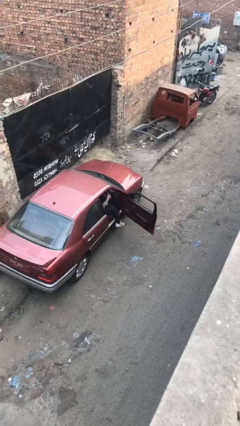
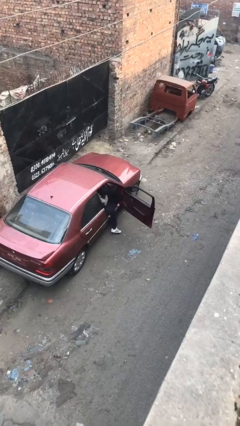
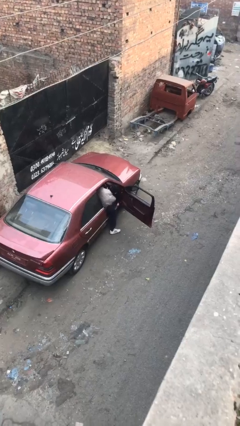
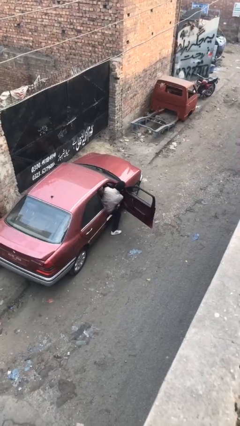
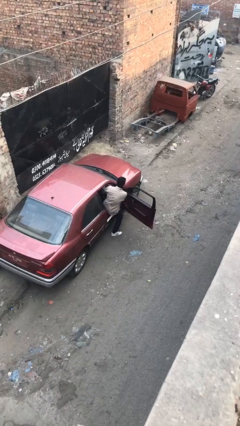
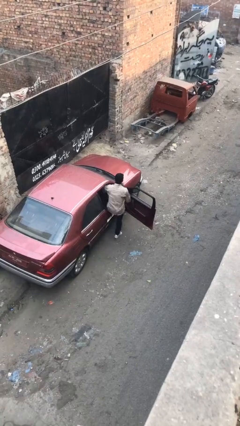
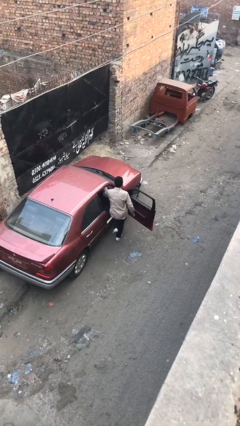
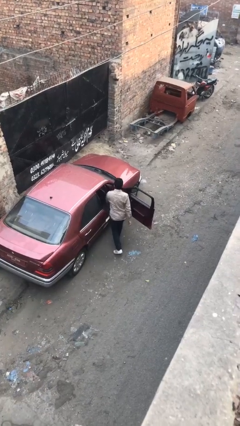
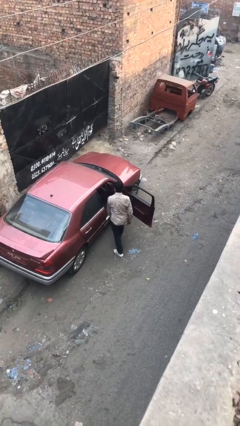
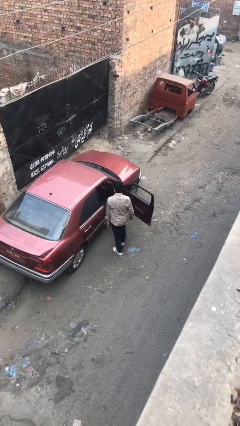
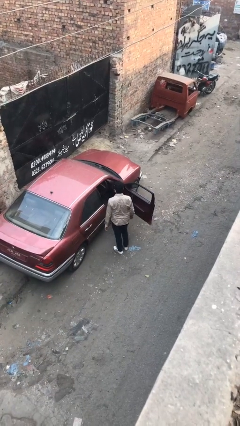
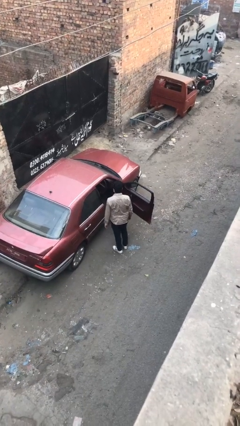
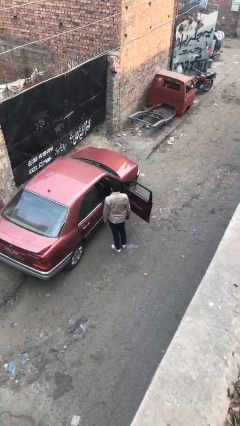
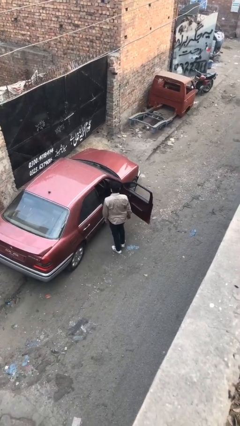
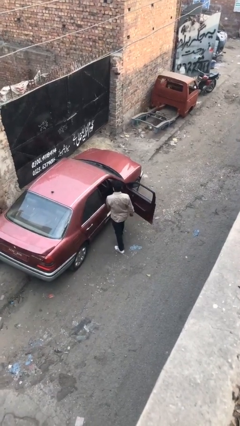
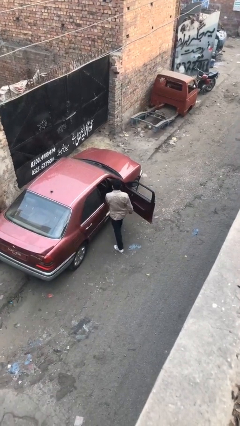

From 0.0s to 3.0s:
person exits car

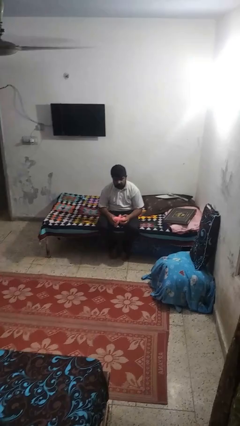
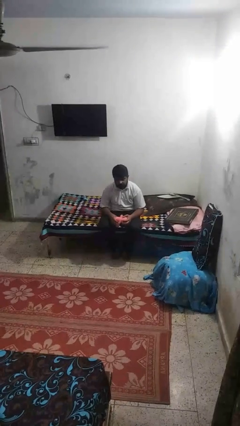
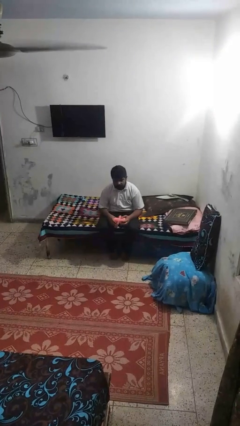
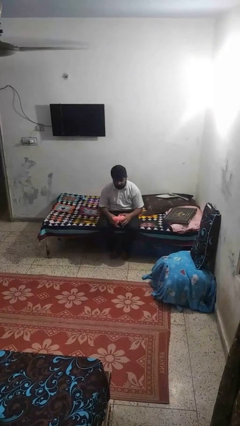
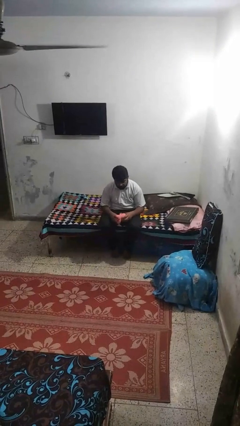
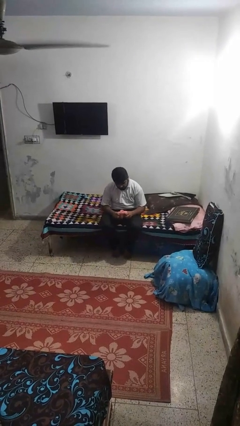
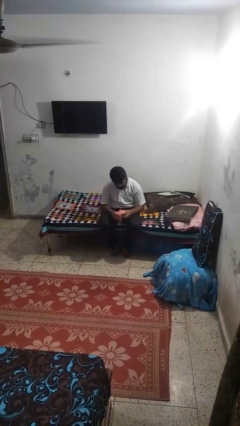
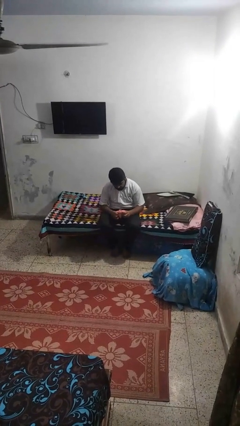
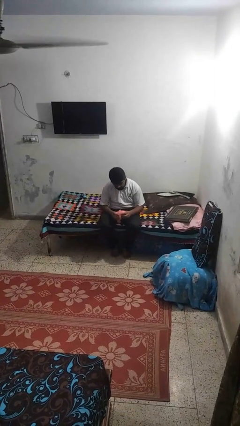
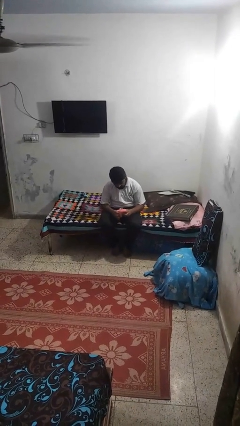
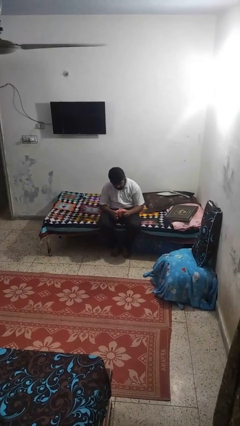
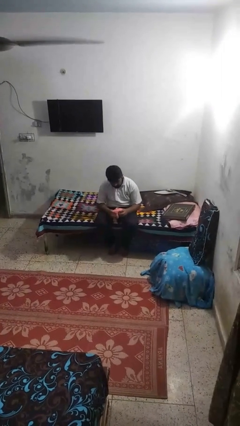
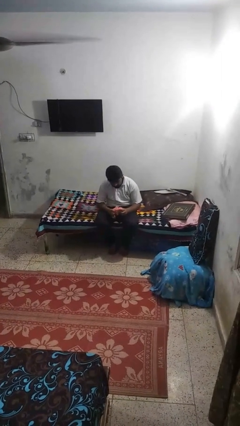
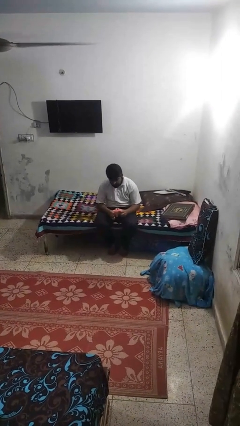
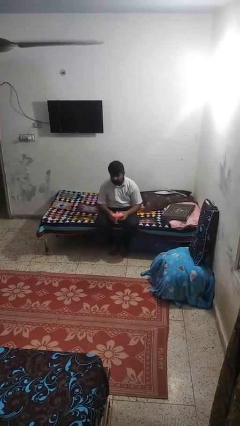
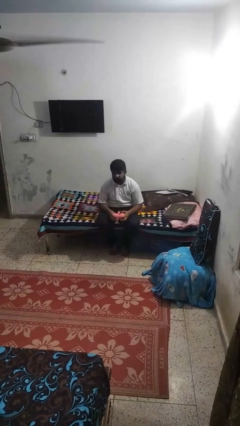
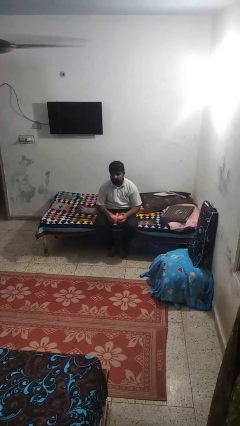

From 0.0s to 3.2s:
person squeezes object

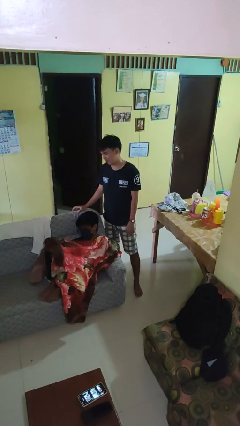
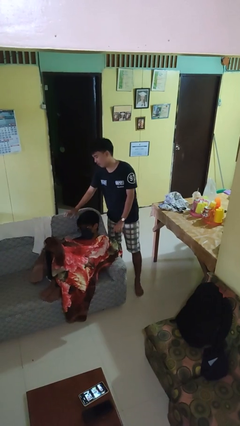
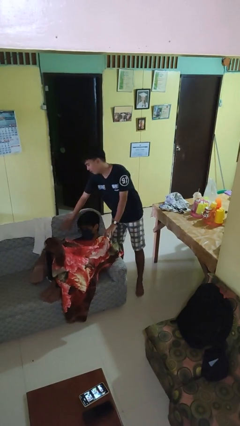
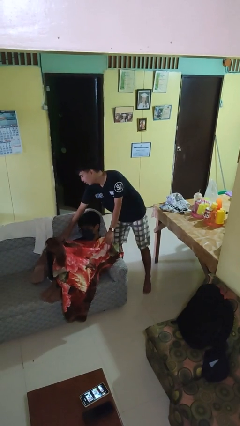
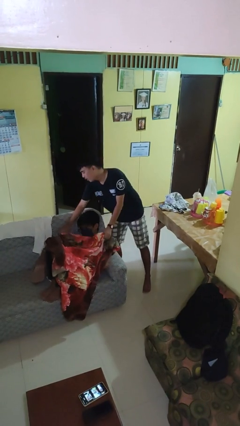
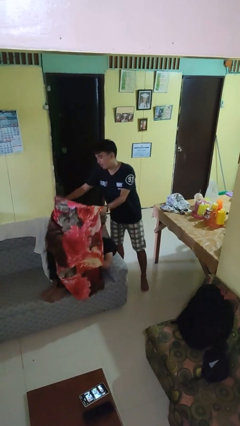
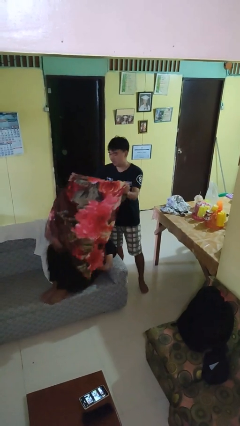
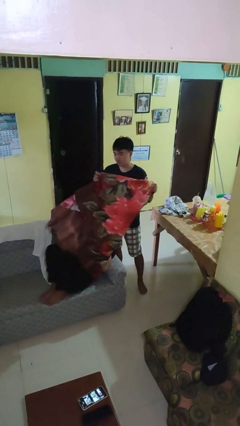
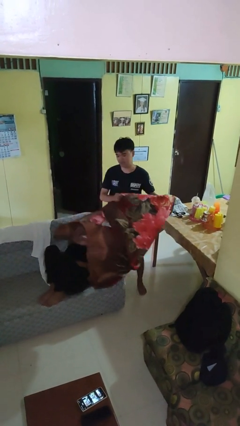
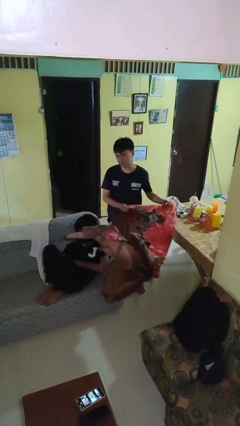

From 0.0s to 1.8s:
person uncovers friend with blanket

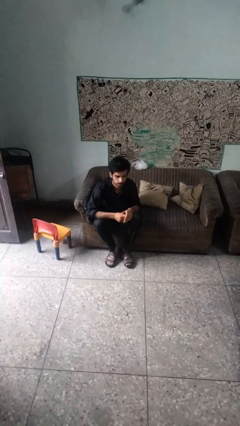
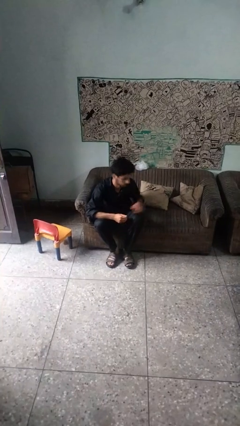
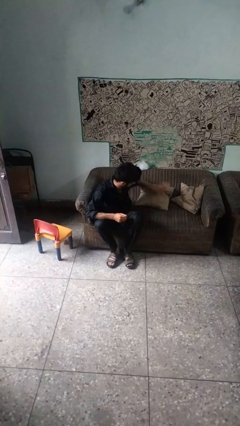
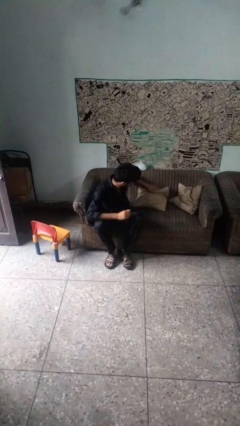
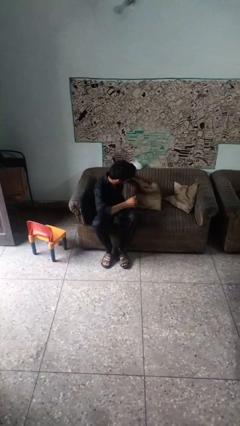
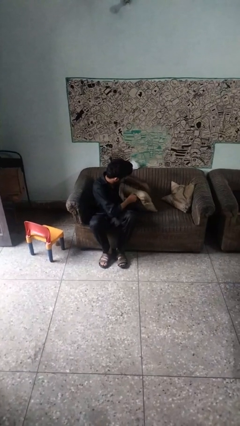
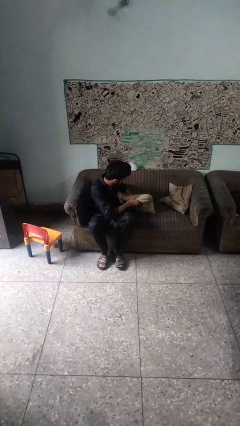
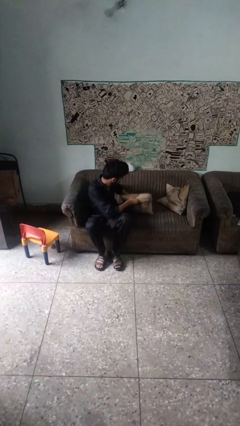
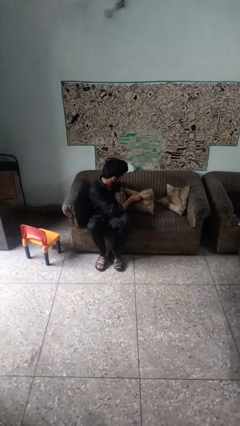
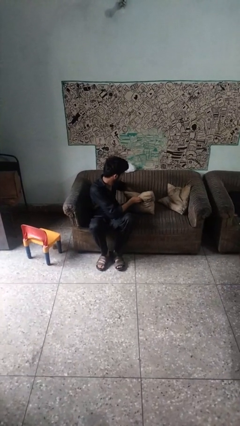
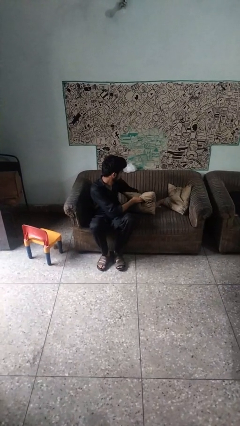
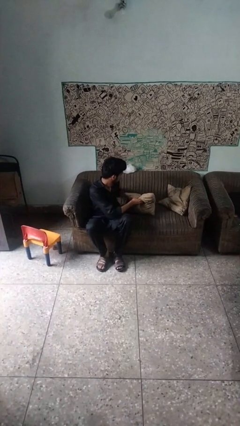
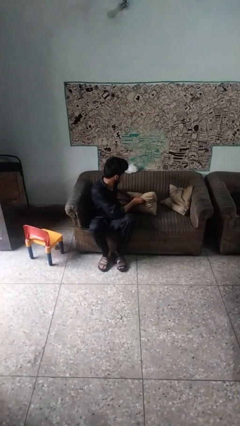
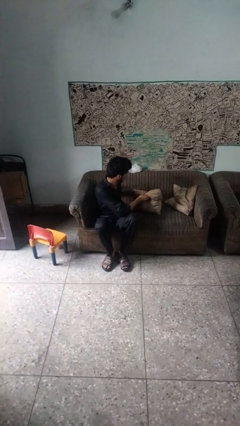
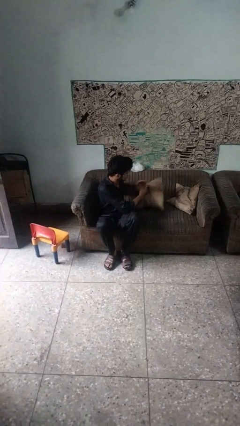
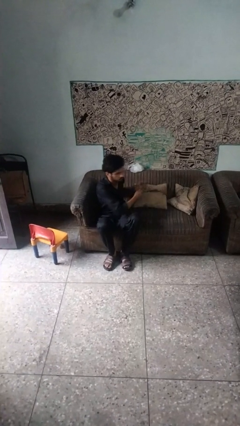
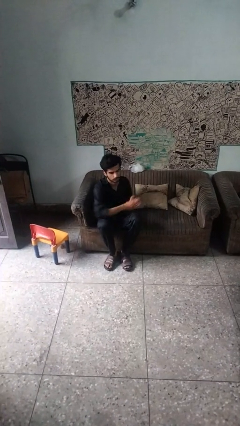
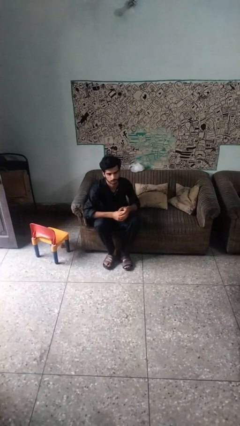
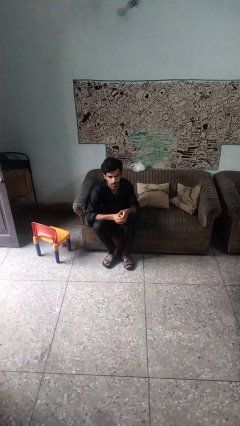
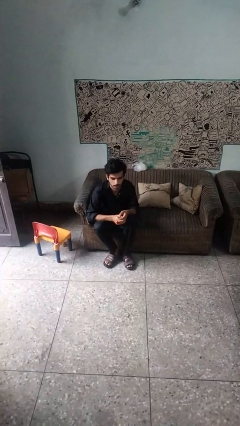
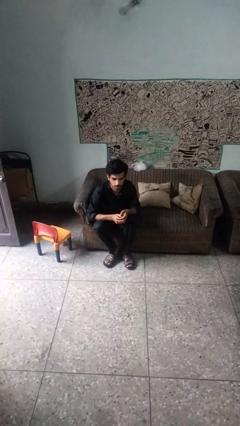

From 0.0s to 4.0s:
person searches in couch

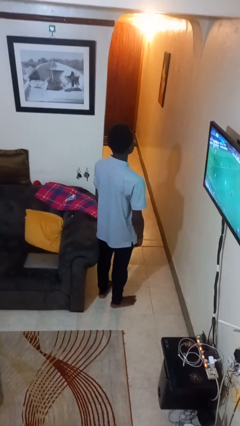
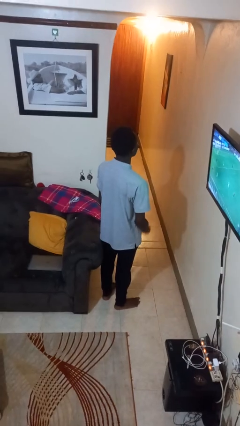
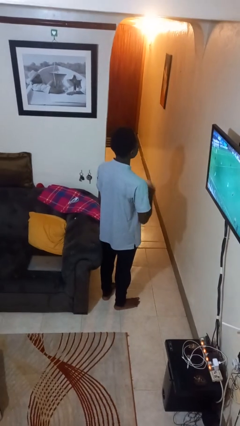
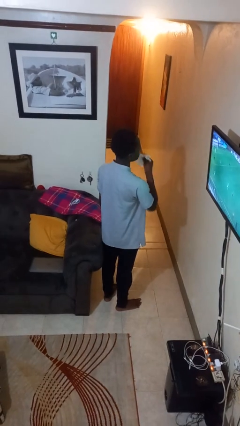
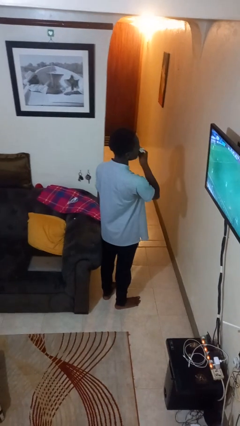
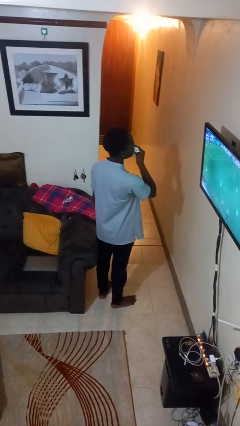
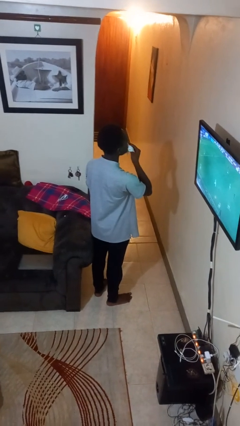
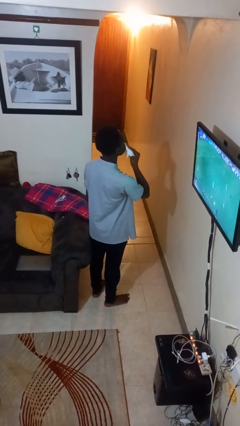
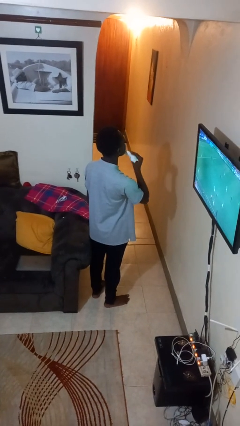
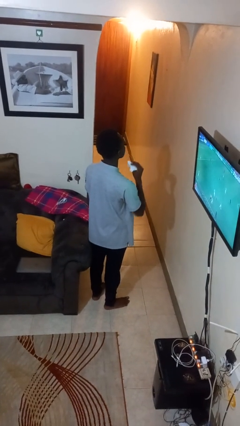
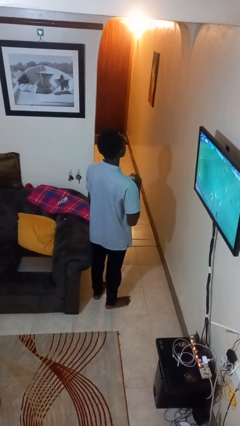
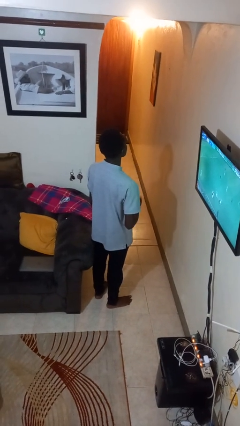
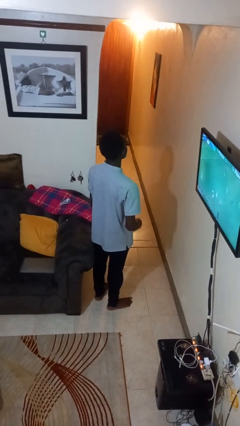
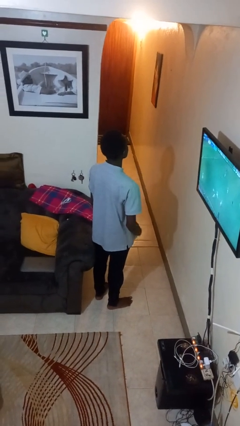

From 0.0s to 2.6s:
person wipes mouth with napkin

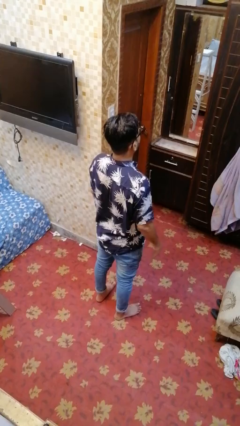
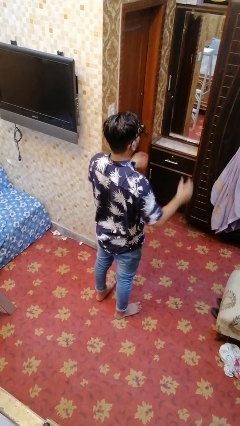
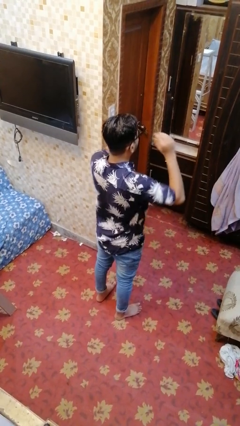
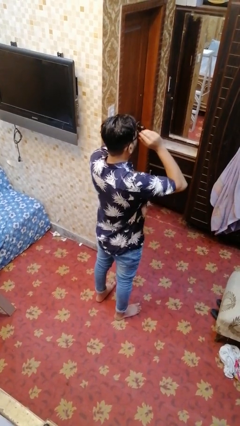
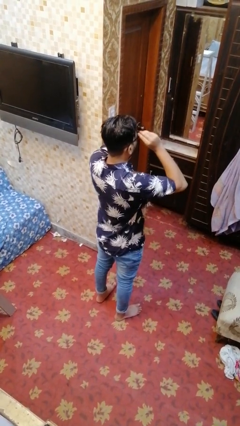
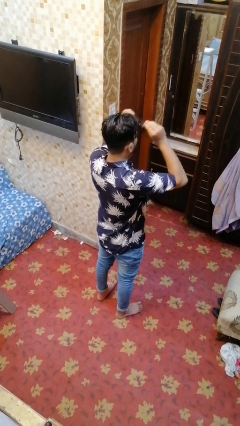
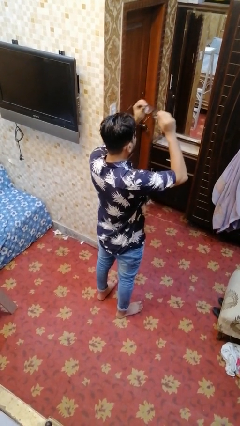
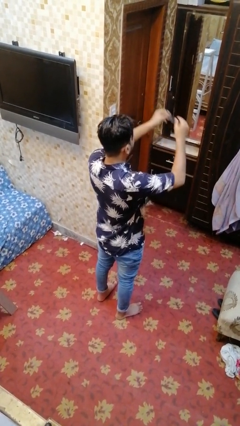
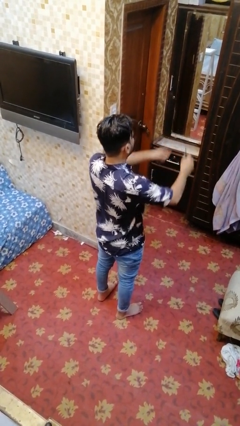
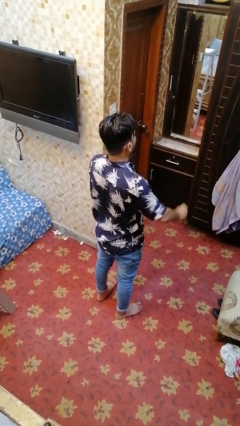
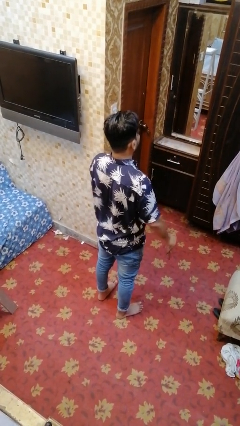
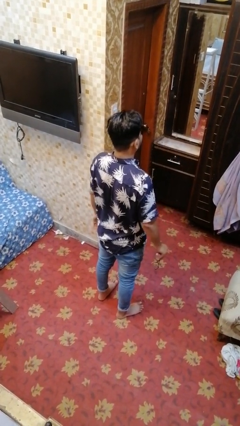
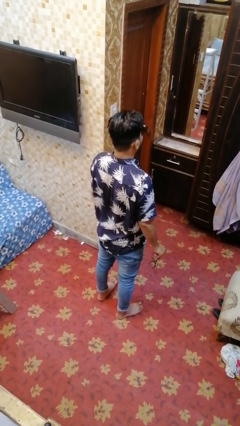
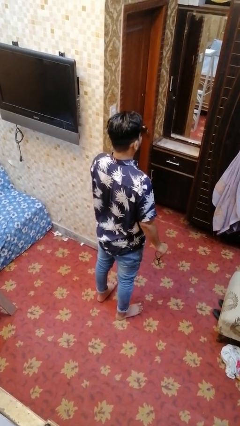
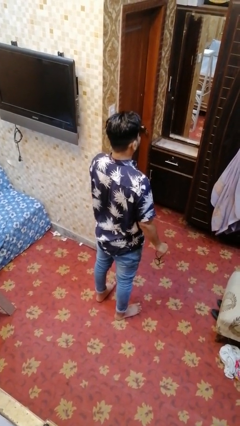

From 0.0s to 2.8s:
person takes off glasses

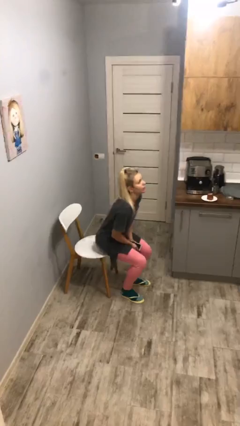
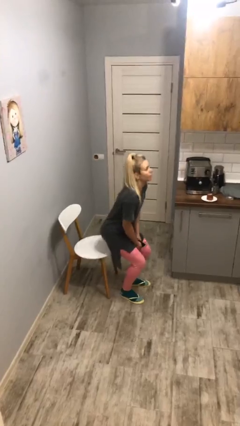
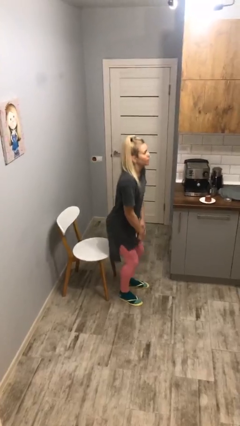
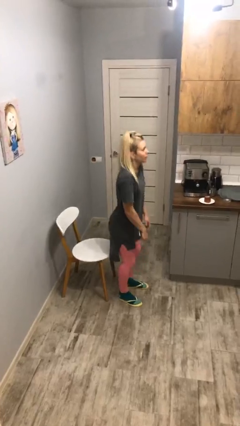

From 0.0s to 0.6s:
person stands up
